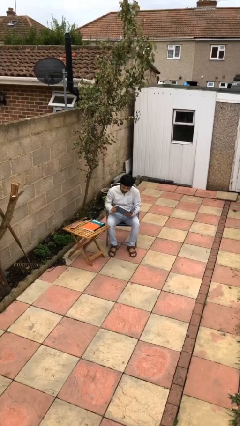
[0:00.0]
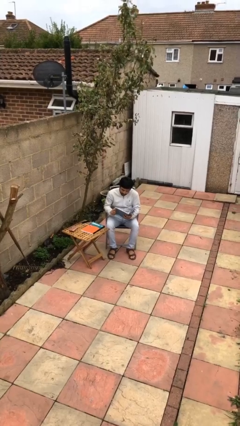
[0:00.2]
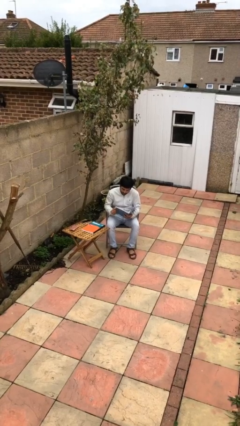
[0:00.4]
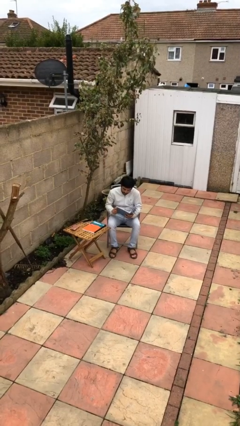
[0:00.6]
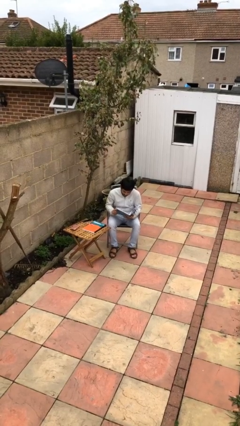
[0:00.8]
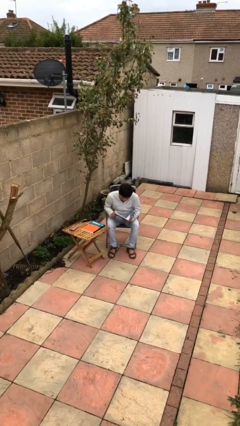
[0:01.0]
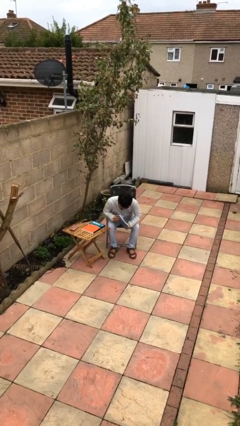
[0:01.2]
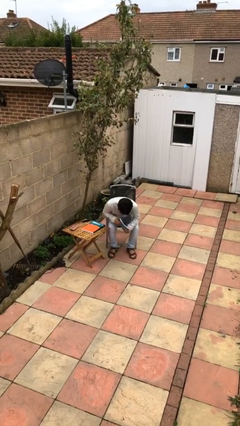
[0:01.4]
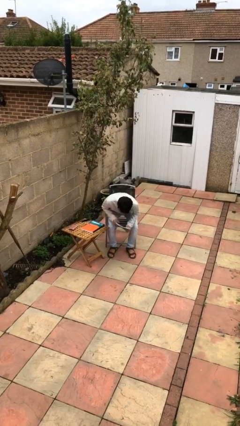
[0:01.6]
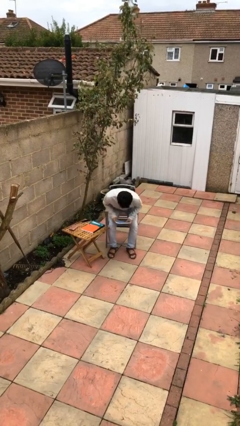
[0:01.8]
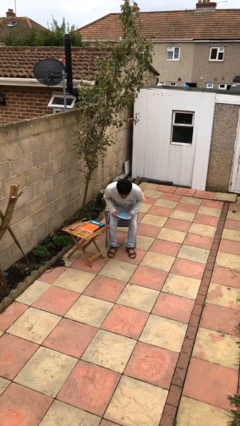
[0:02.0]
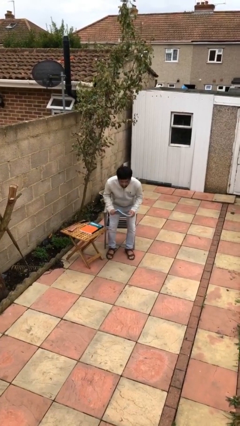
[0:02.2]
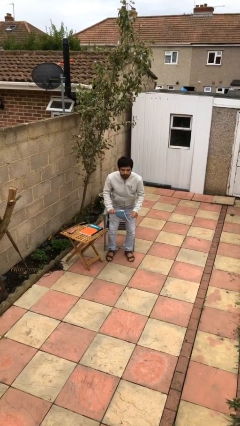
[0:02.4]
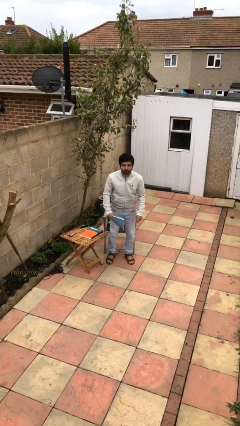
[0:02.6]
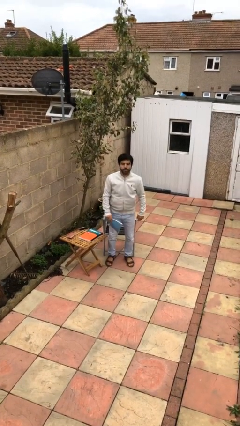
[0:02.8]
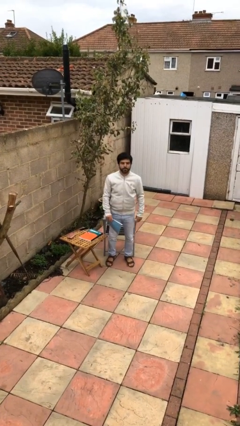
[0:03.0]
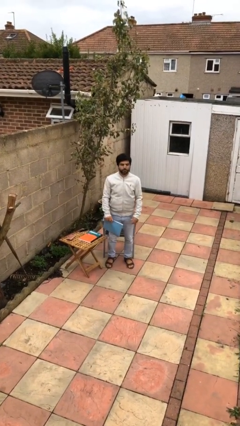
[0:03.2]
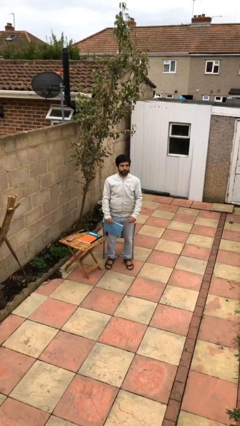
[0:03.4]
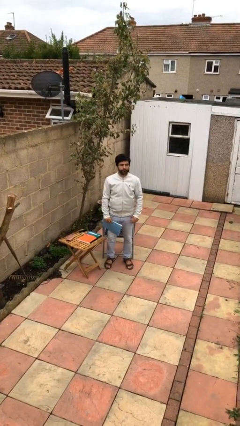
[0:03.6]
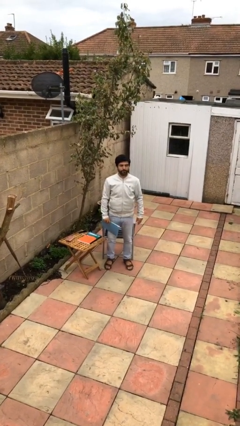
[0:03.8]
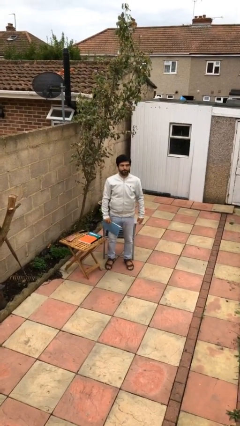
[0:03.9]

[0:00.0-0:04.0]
person stands up

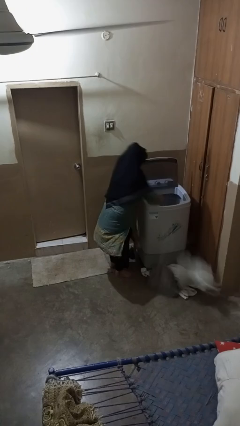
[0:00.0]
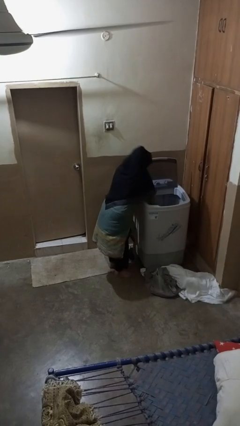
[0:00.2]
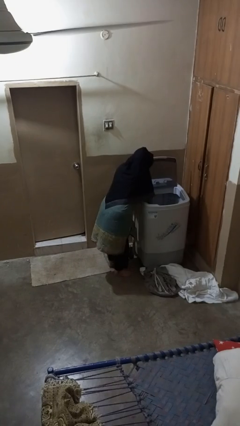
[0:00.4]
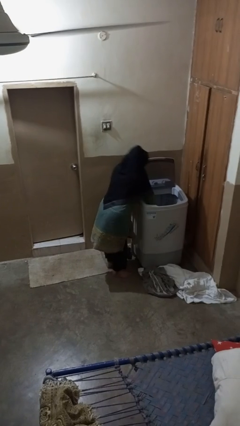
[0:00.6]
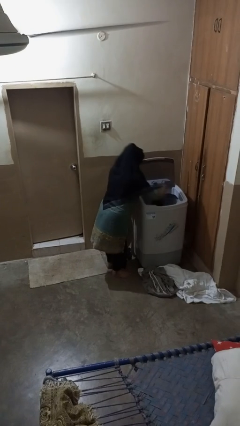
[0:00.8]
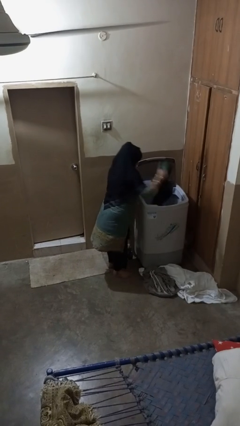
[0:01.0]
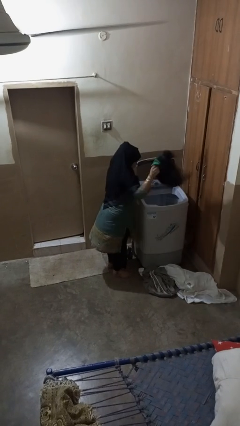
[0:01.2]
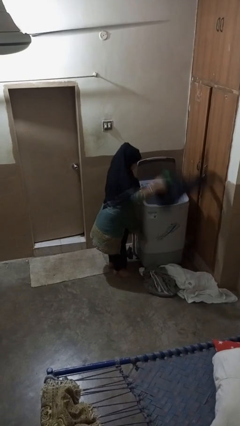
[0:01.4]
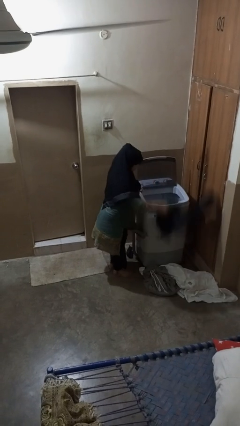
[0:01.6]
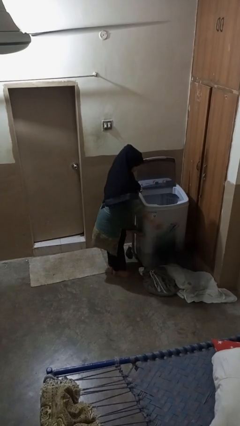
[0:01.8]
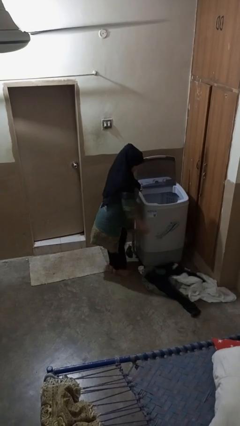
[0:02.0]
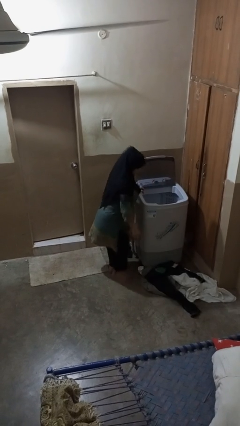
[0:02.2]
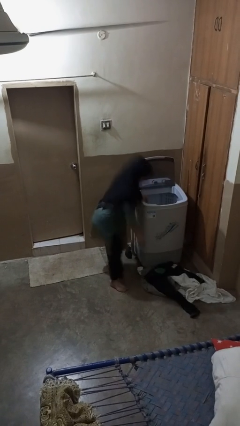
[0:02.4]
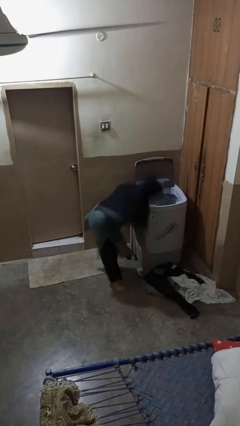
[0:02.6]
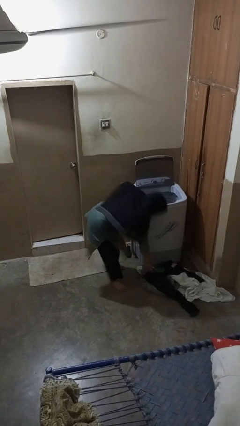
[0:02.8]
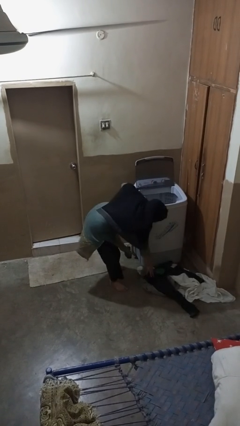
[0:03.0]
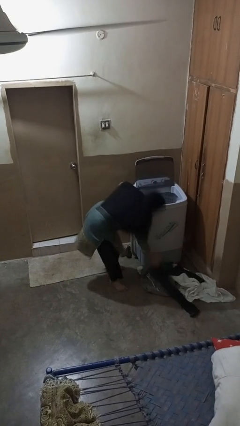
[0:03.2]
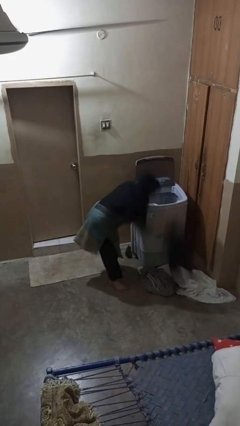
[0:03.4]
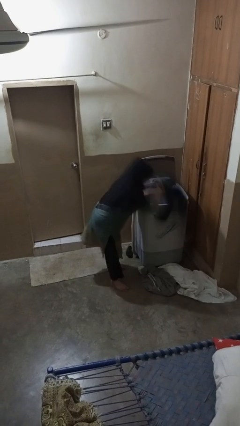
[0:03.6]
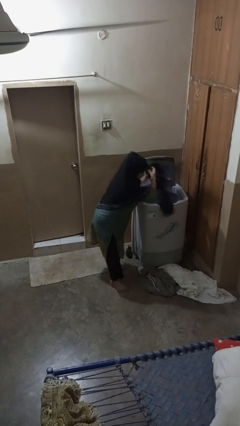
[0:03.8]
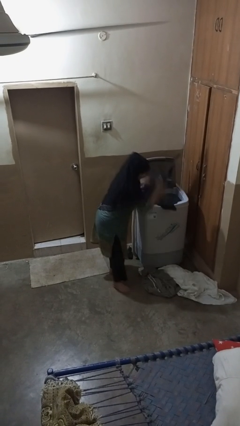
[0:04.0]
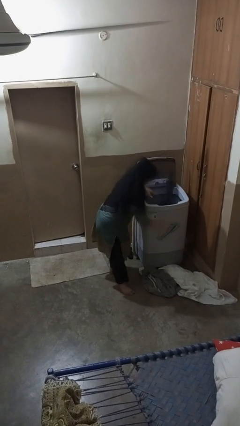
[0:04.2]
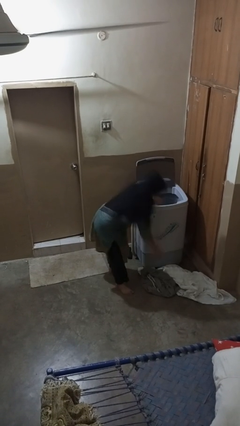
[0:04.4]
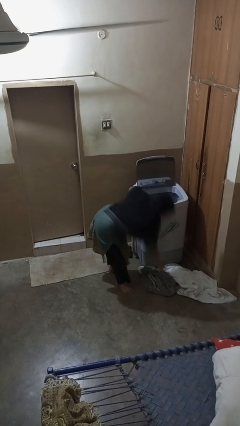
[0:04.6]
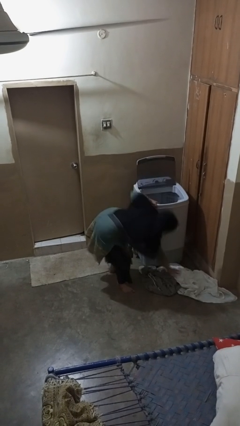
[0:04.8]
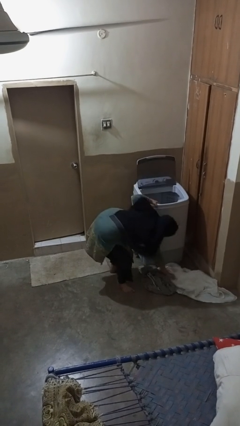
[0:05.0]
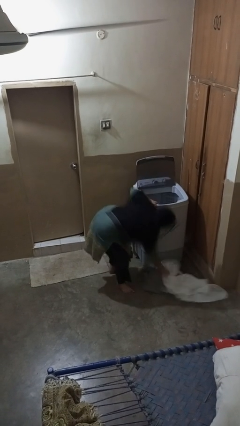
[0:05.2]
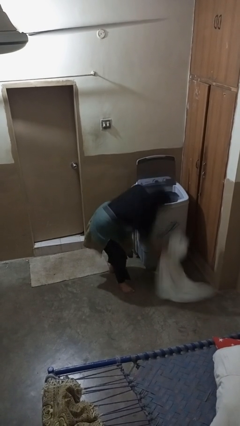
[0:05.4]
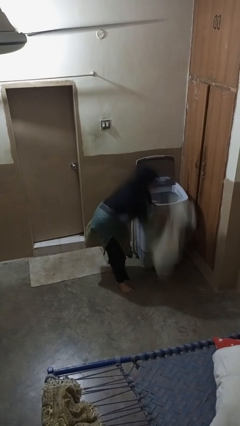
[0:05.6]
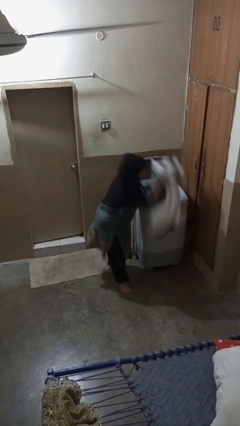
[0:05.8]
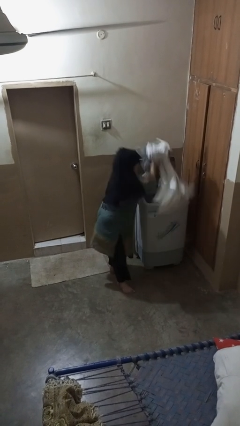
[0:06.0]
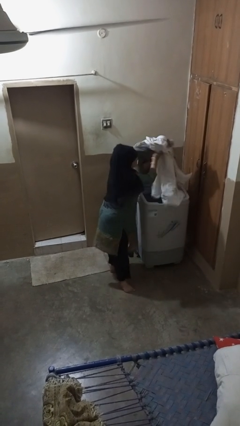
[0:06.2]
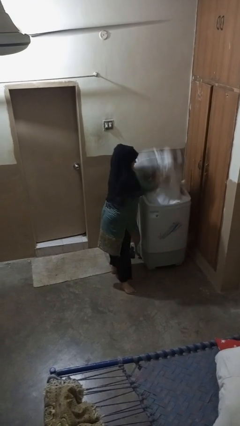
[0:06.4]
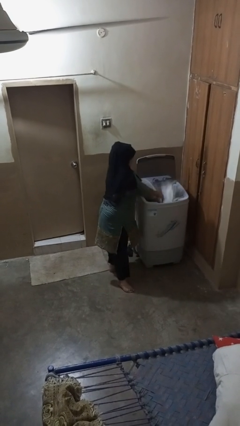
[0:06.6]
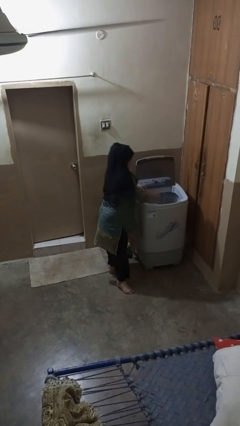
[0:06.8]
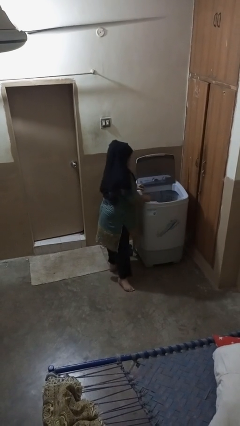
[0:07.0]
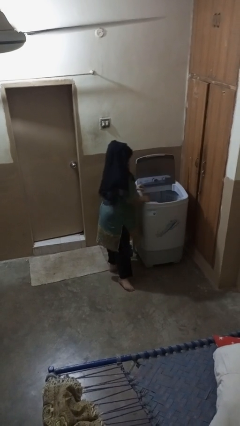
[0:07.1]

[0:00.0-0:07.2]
person loads clotheswasher

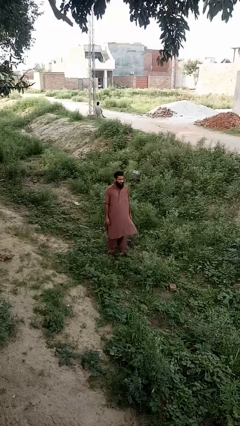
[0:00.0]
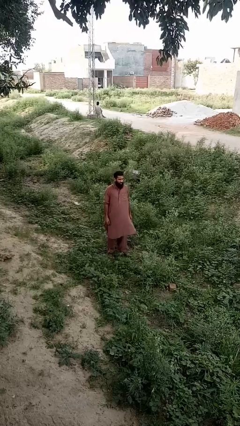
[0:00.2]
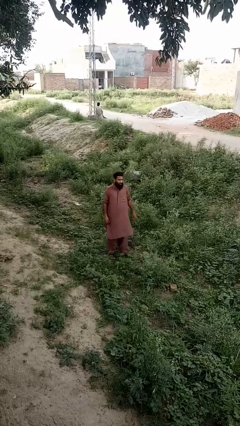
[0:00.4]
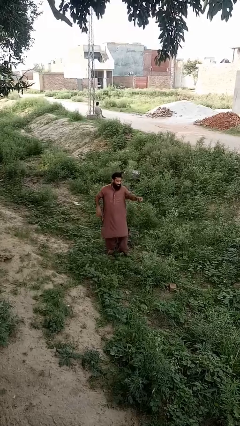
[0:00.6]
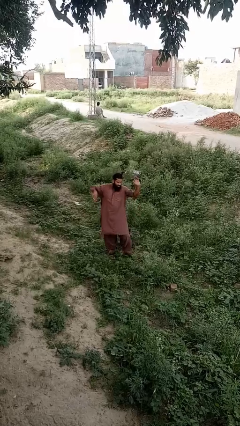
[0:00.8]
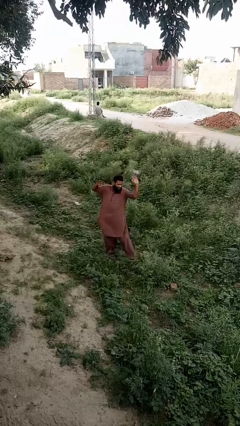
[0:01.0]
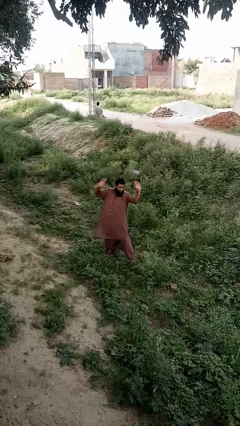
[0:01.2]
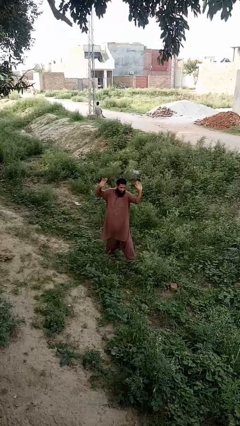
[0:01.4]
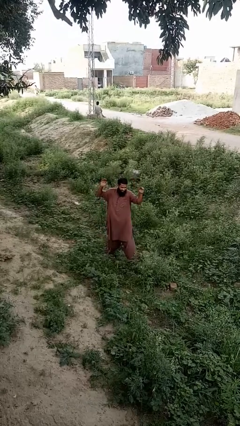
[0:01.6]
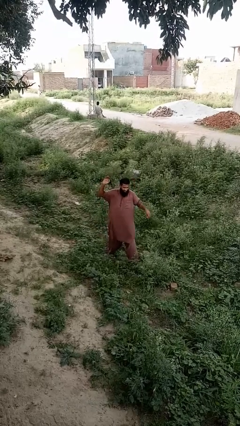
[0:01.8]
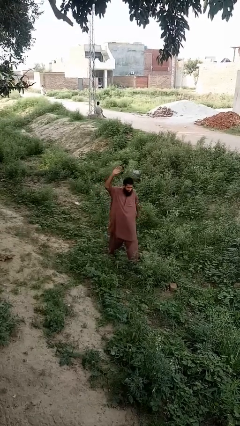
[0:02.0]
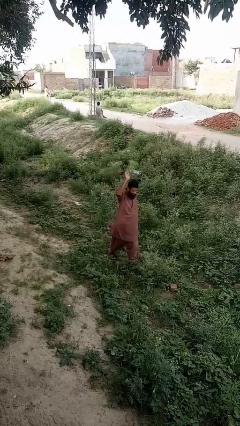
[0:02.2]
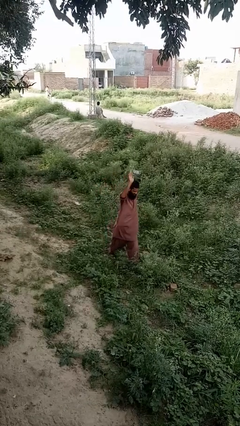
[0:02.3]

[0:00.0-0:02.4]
person dances in place

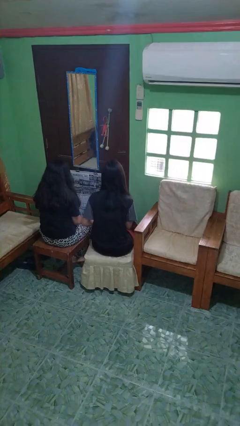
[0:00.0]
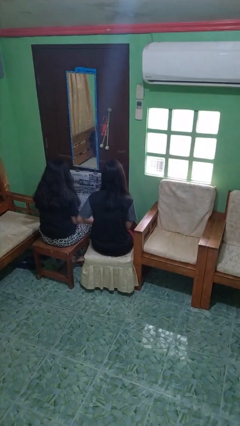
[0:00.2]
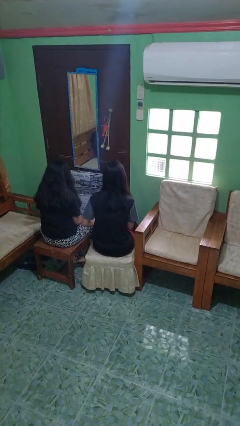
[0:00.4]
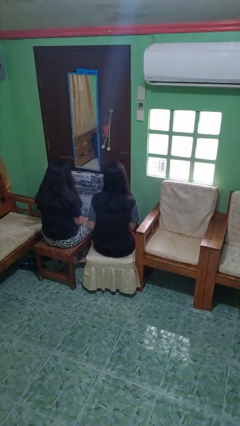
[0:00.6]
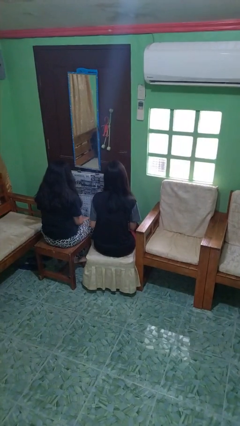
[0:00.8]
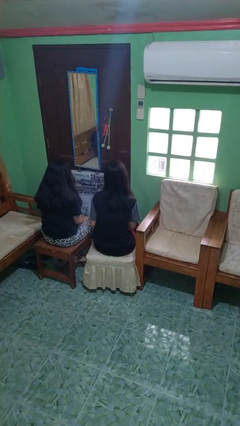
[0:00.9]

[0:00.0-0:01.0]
person nudges person with elbow

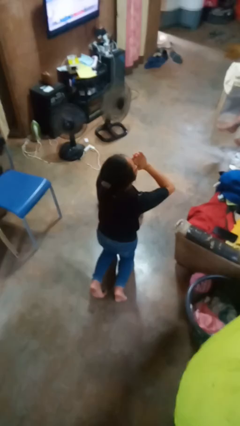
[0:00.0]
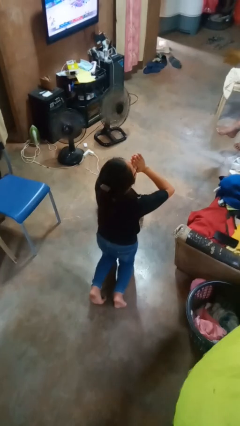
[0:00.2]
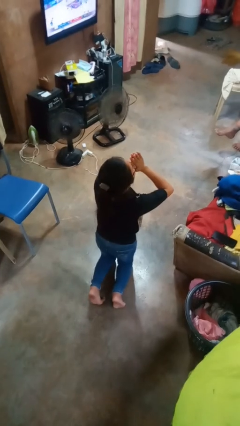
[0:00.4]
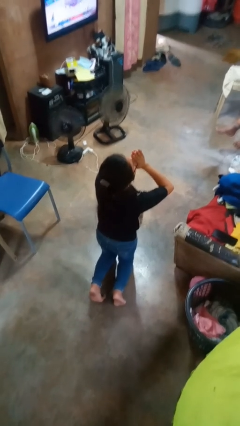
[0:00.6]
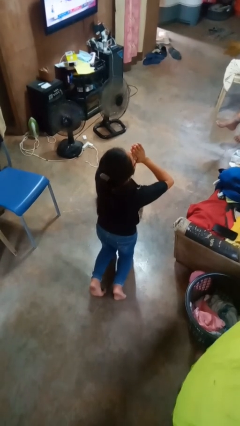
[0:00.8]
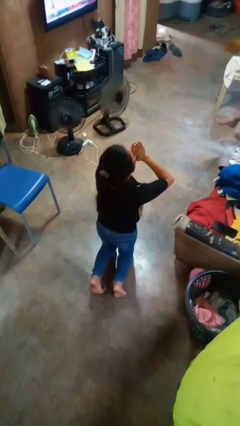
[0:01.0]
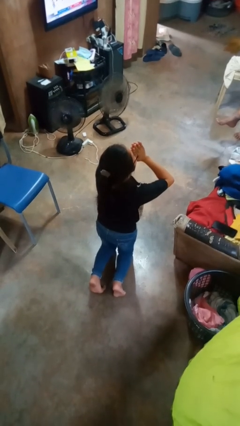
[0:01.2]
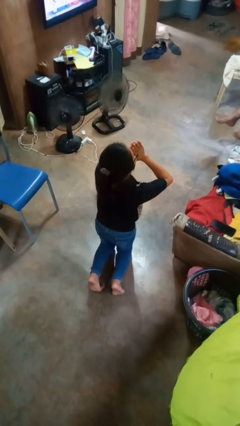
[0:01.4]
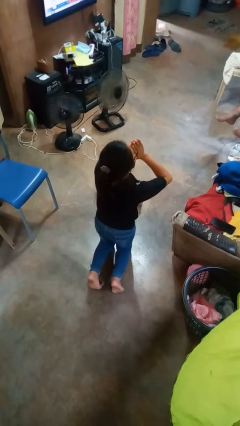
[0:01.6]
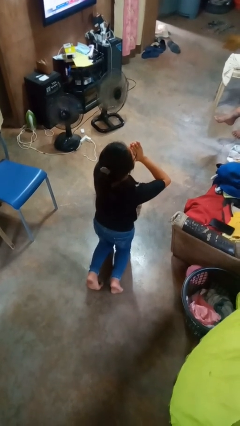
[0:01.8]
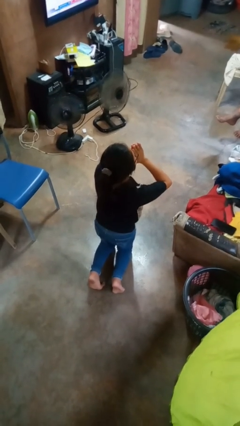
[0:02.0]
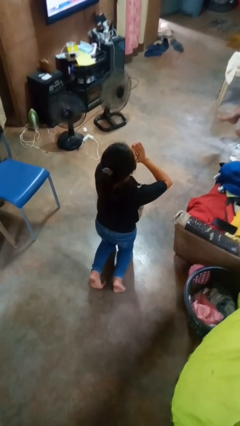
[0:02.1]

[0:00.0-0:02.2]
person prays

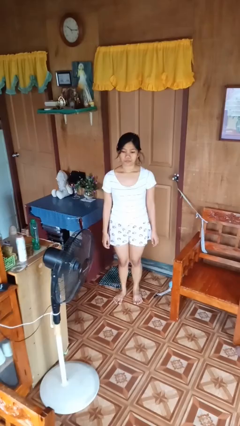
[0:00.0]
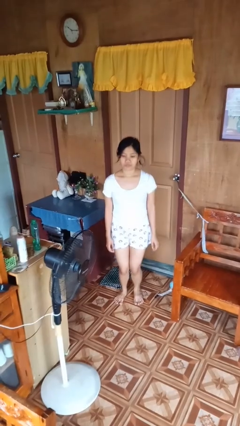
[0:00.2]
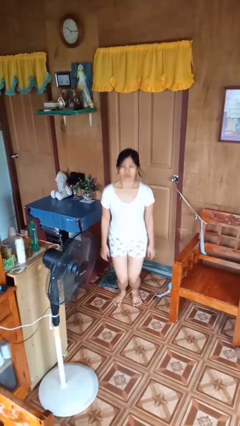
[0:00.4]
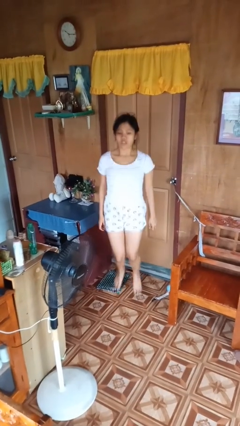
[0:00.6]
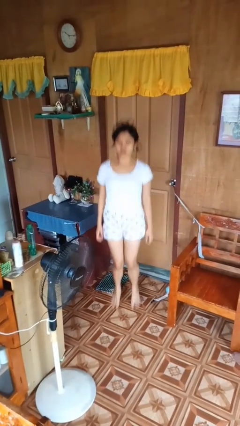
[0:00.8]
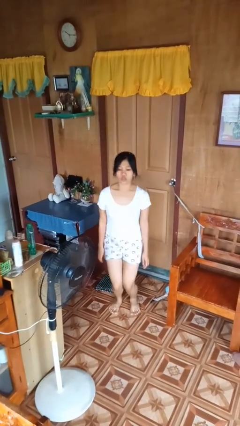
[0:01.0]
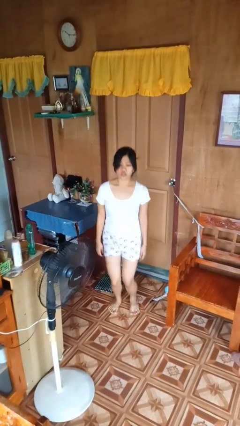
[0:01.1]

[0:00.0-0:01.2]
person jumps
